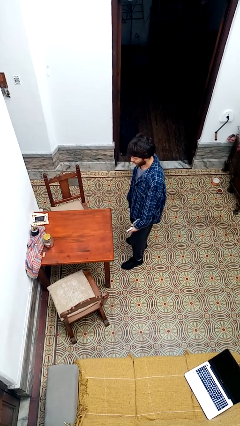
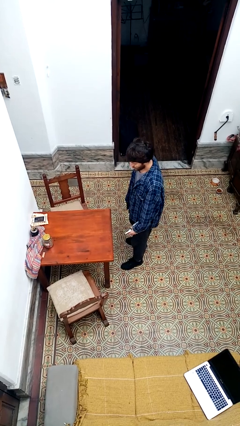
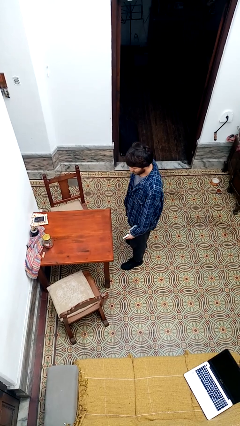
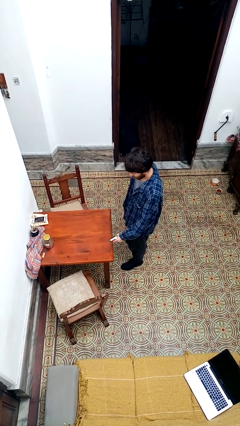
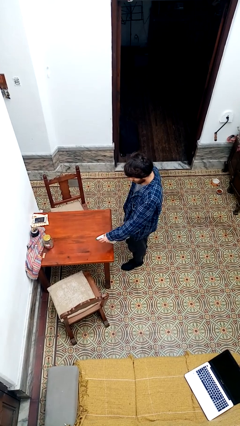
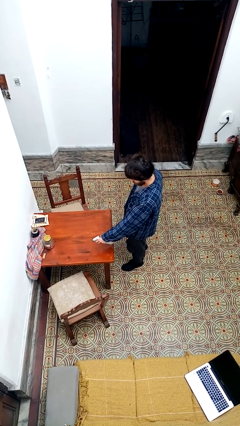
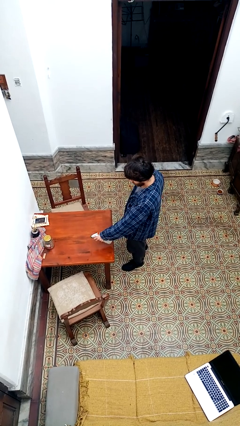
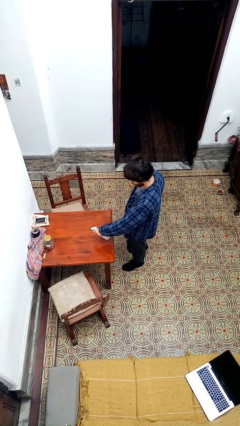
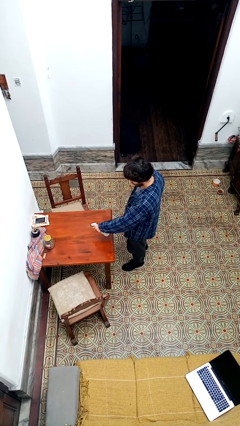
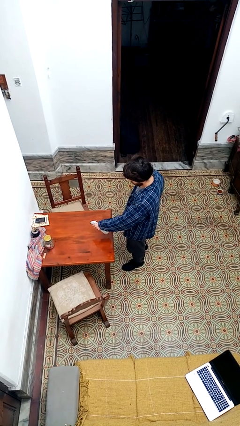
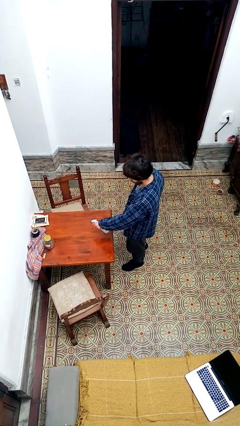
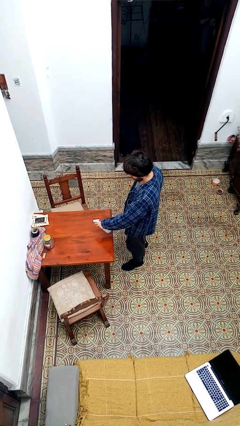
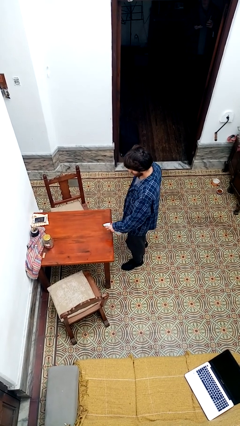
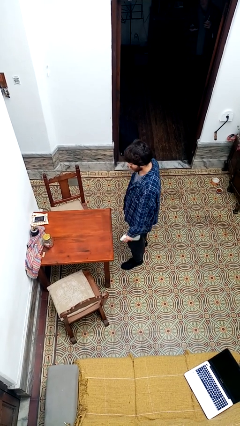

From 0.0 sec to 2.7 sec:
person sprays from bottle

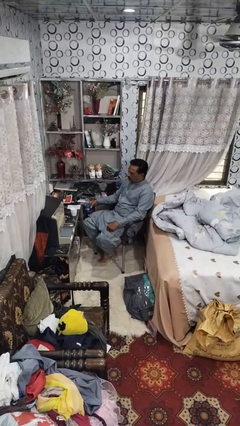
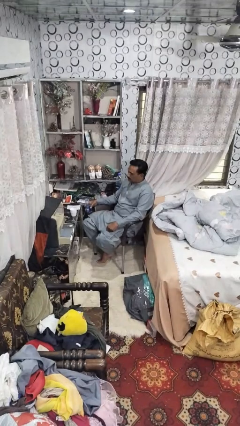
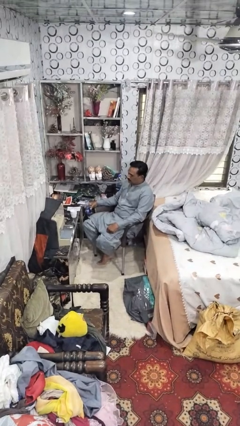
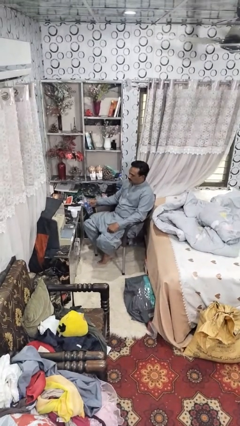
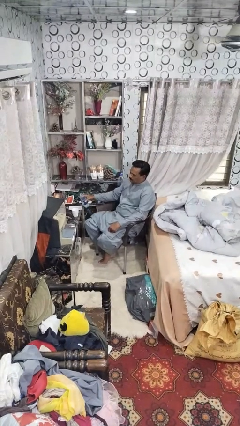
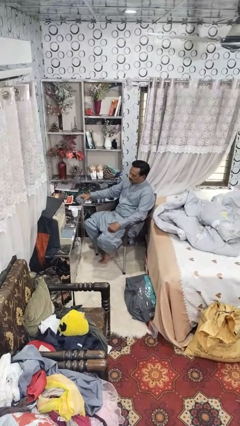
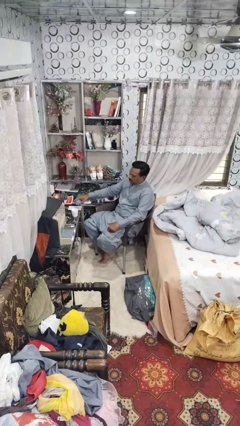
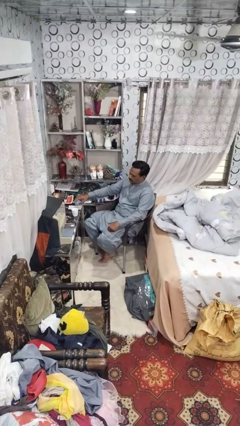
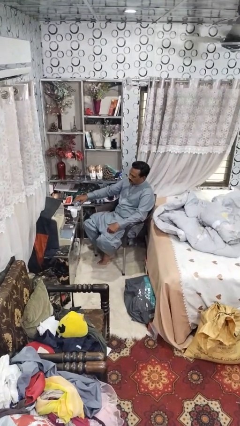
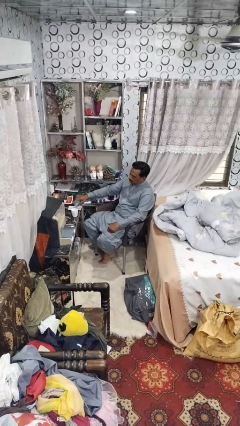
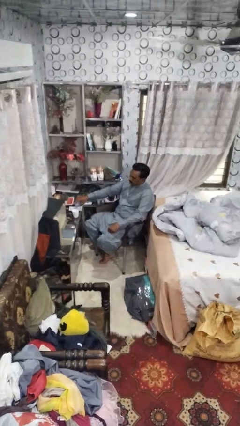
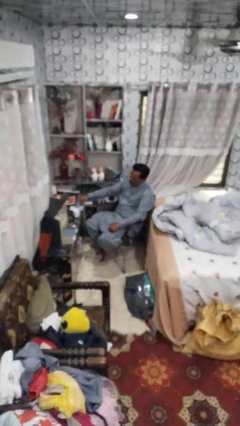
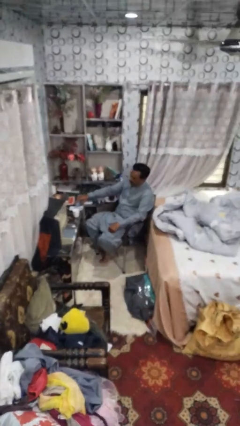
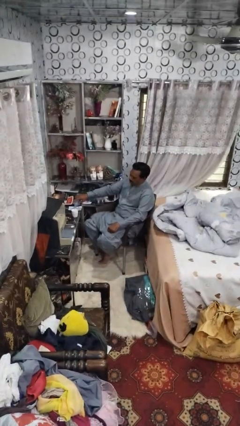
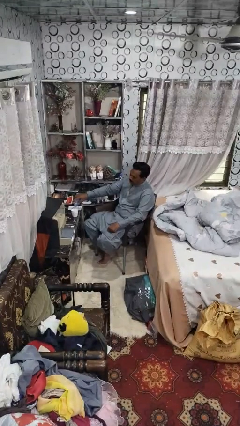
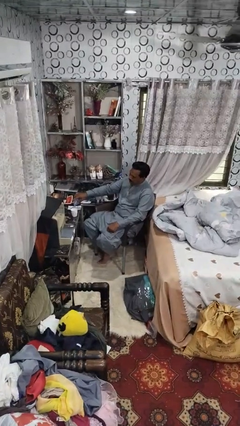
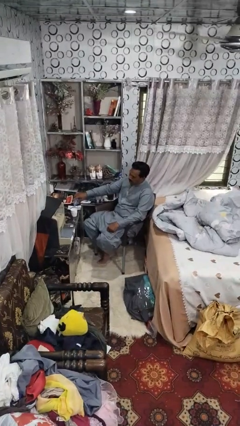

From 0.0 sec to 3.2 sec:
person pours liquid into cup

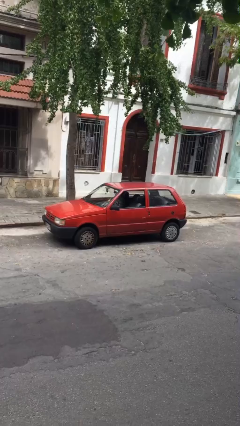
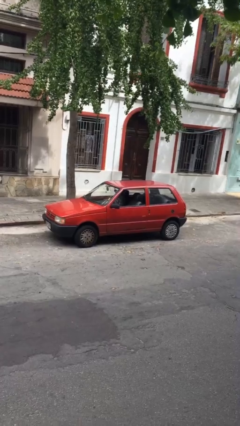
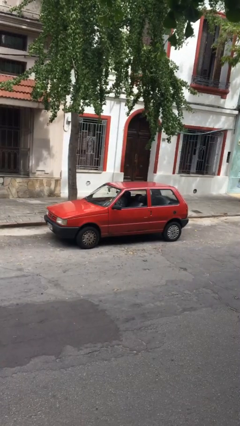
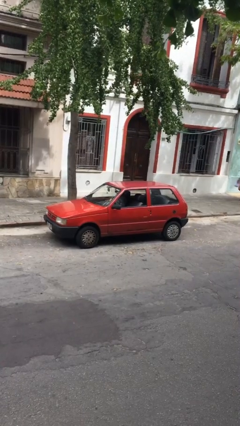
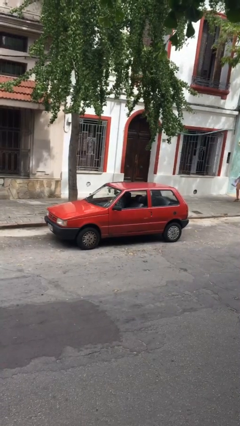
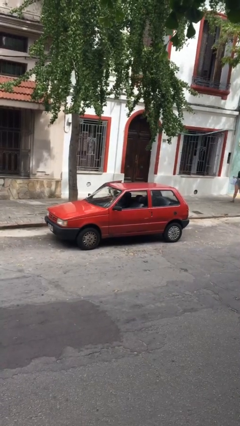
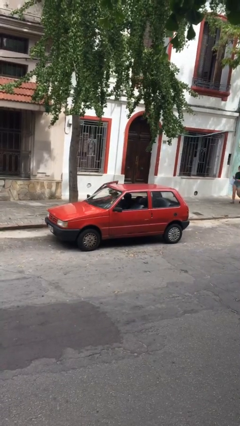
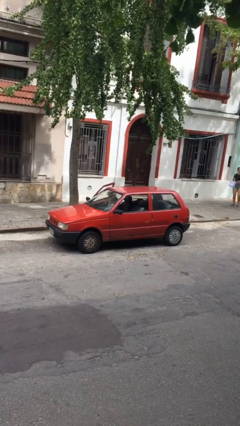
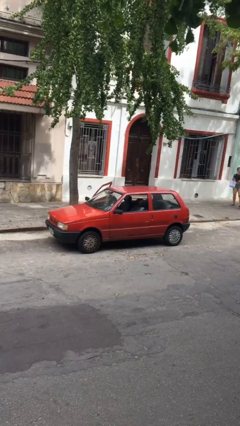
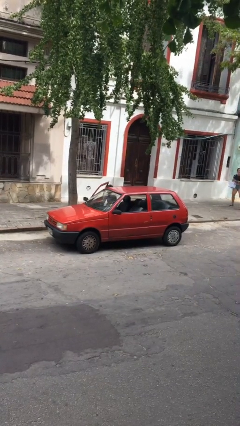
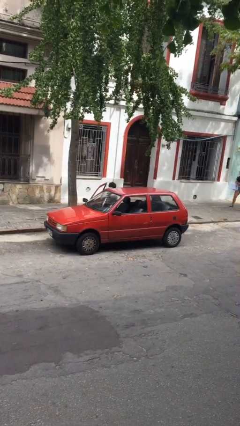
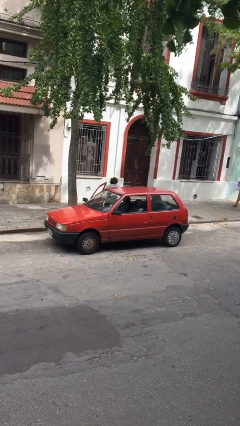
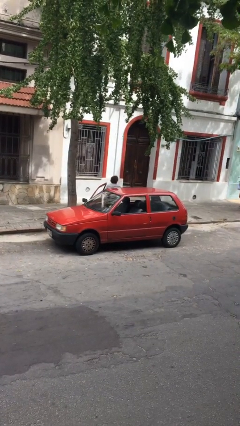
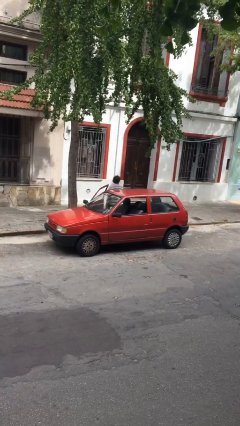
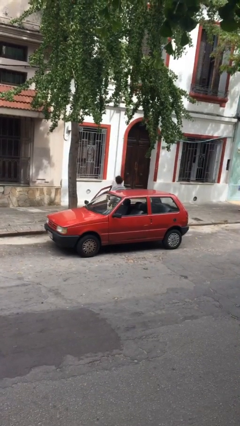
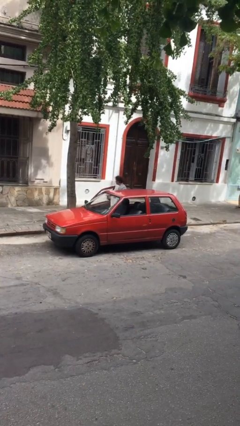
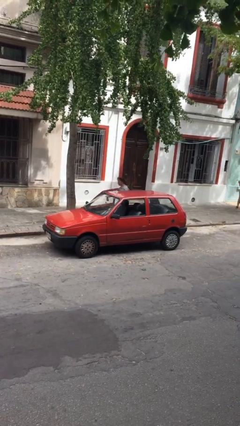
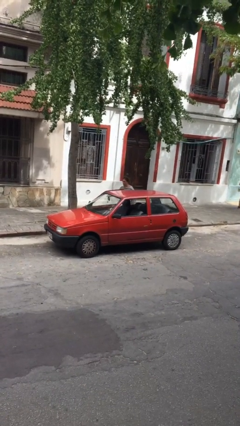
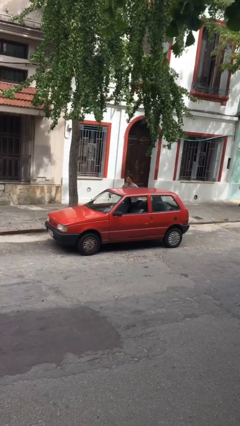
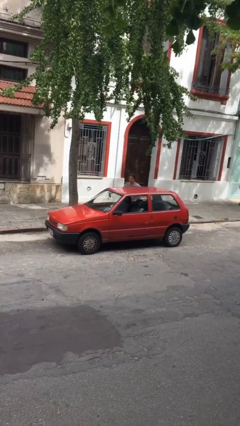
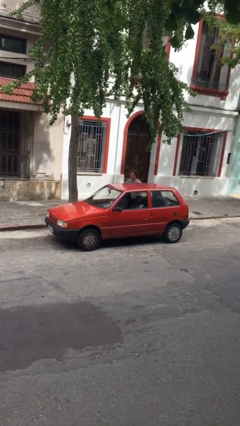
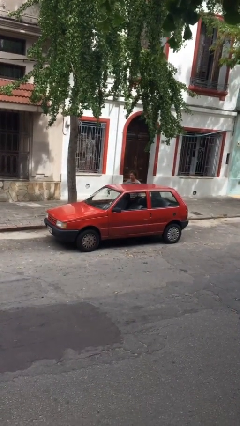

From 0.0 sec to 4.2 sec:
car drops off person

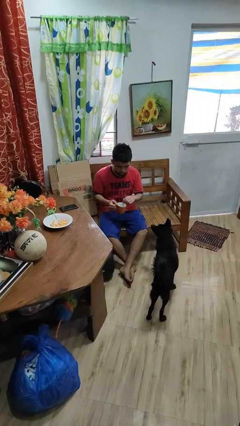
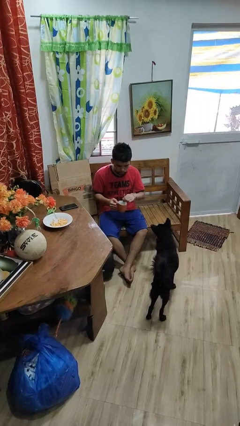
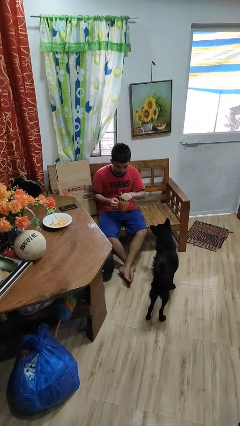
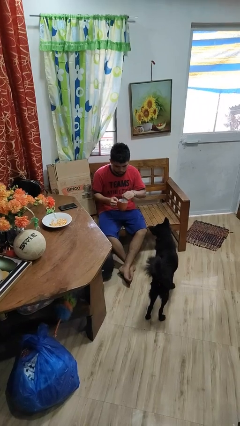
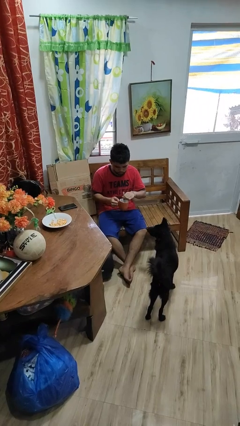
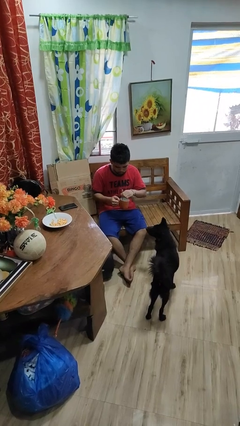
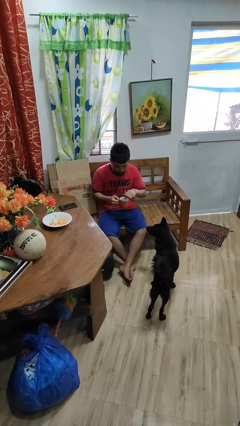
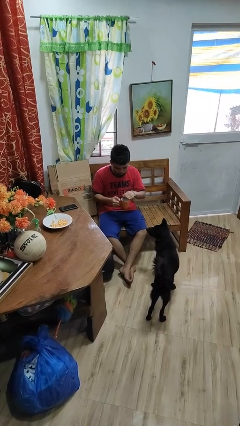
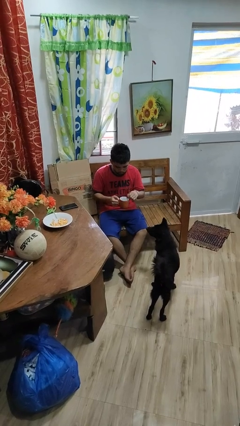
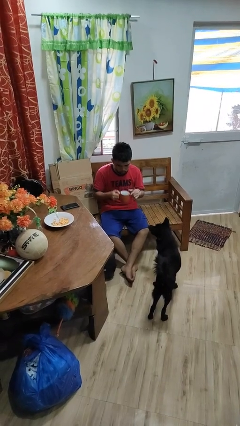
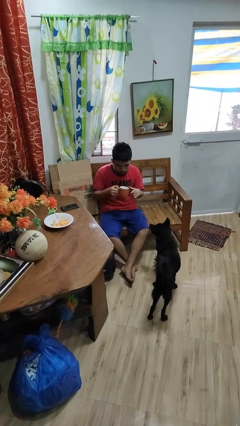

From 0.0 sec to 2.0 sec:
person stirs mug

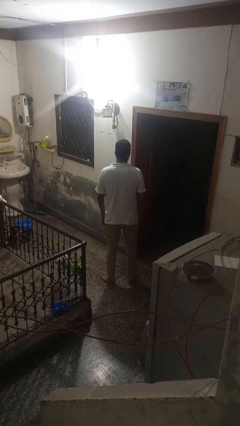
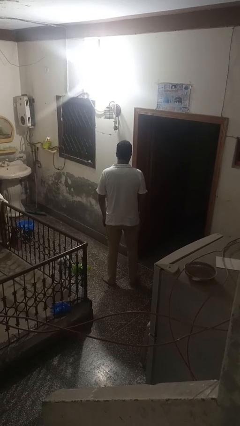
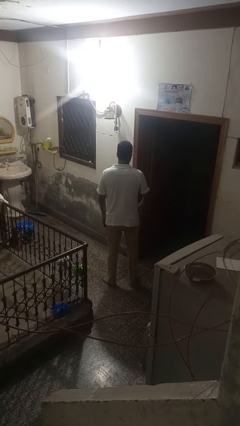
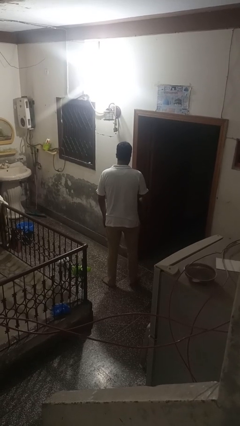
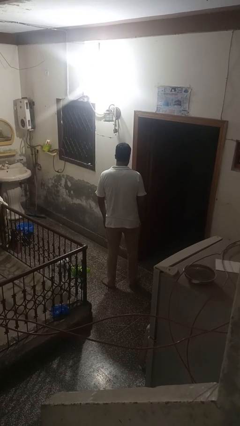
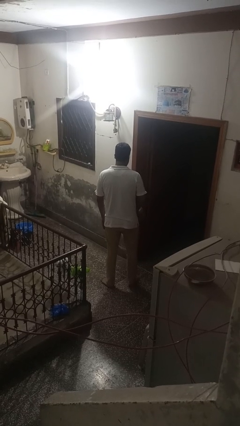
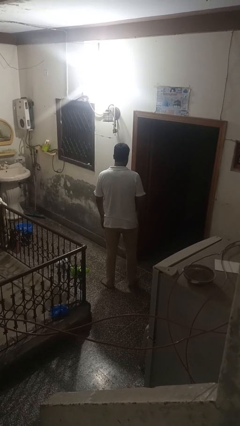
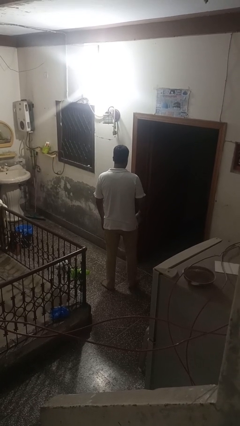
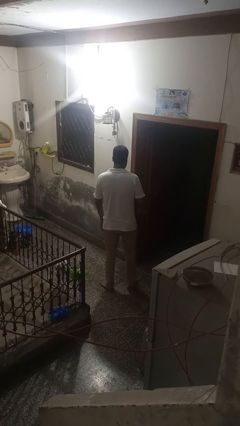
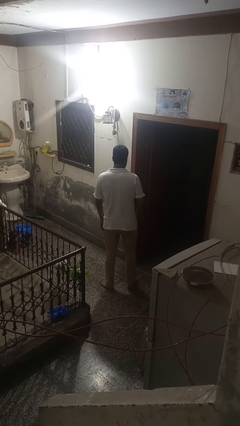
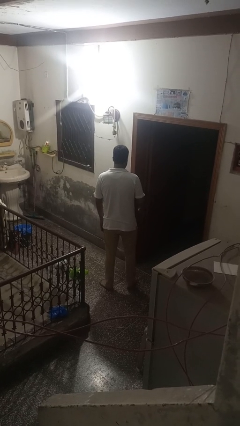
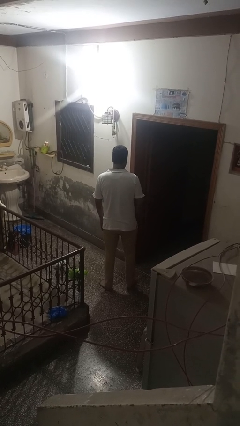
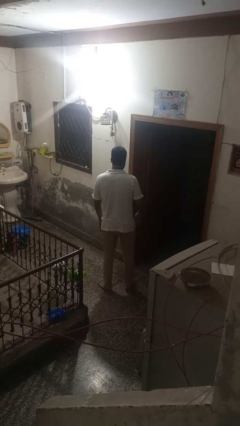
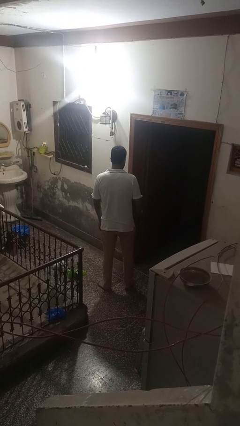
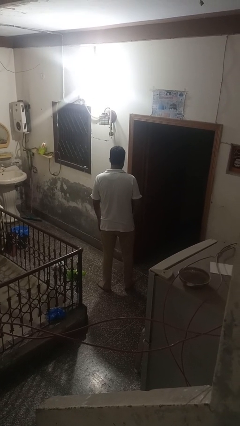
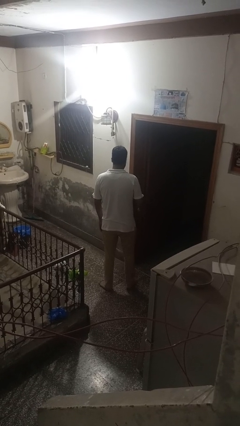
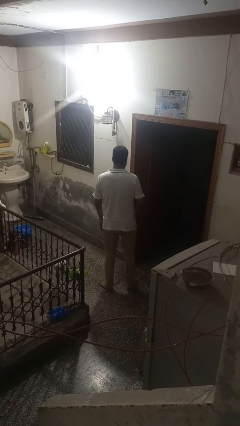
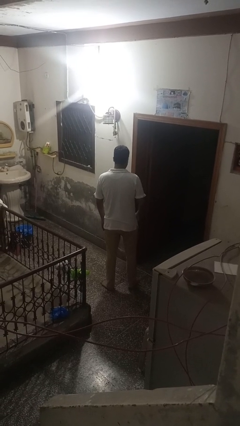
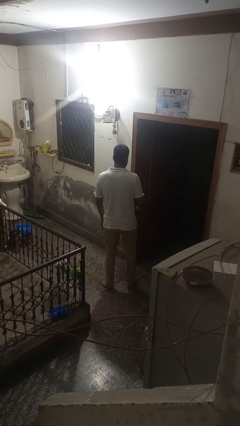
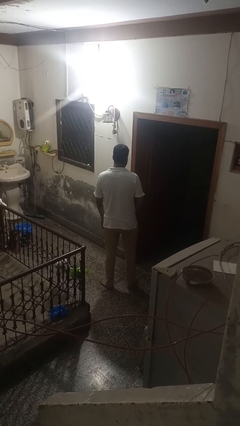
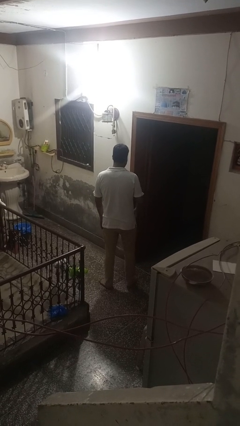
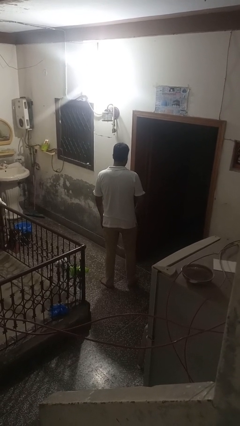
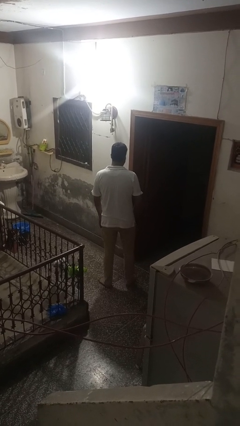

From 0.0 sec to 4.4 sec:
person slaps hands on thighs

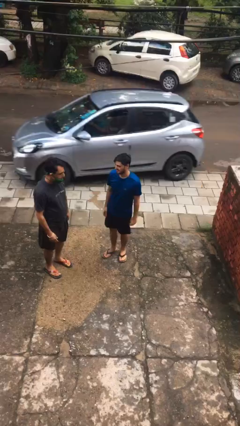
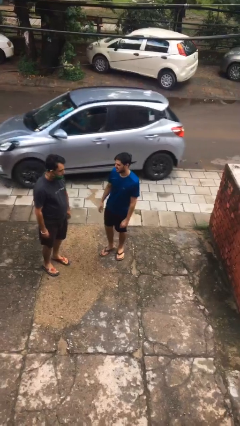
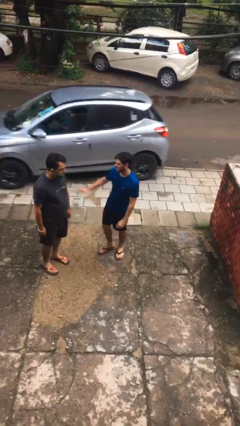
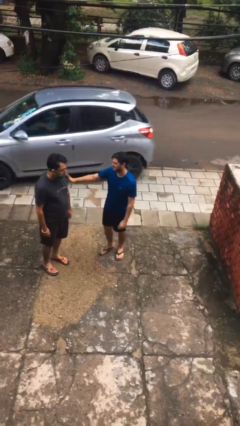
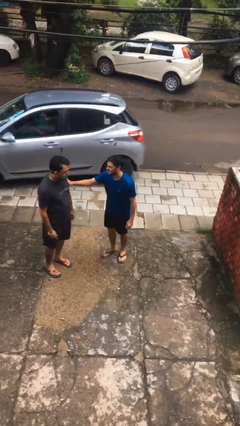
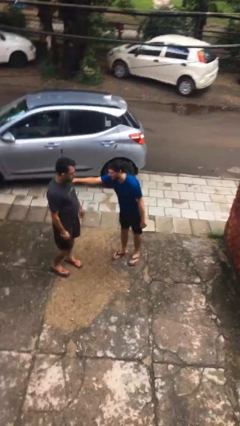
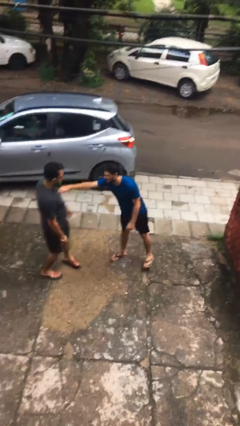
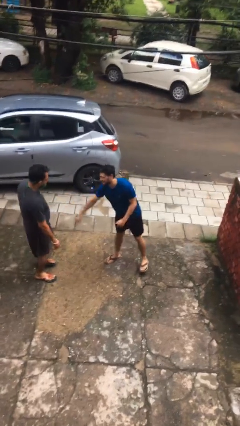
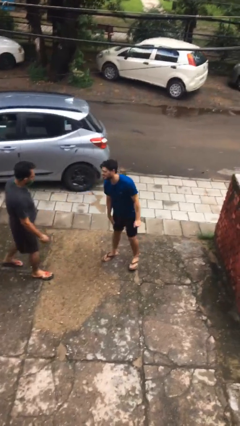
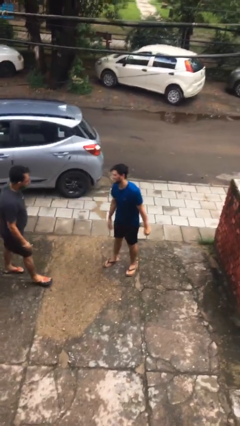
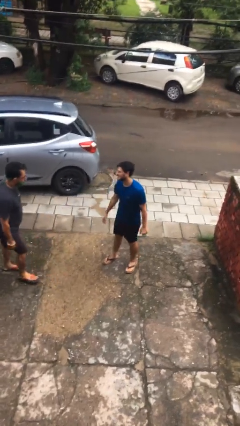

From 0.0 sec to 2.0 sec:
person shoves person
